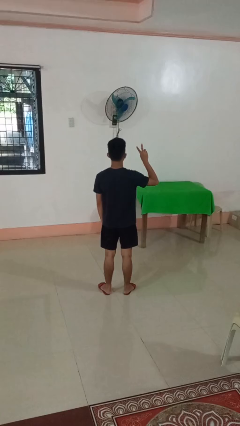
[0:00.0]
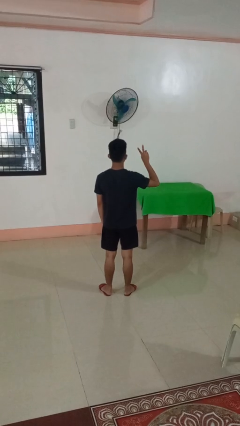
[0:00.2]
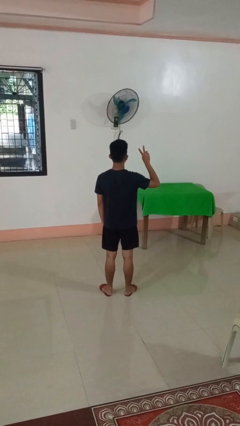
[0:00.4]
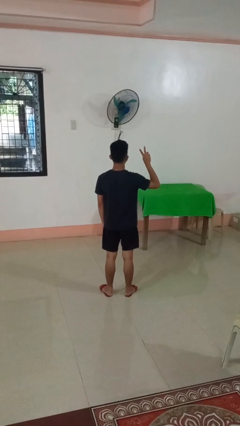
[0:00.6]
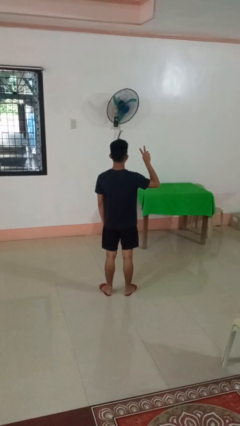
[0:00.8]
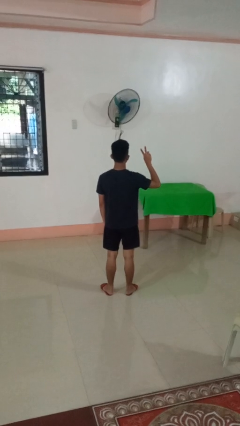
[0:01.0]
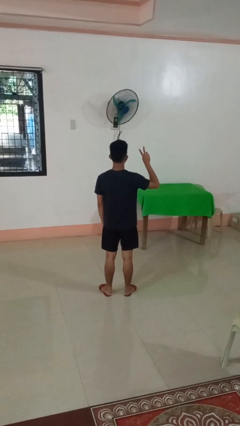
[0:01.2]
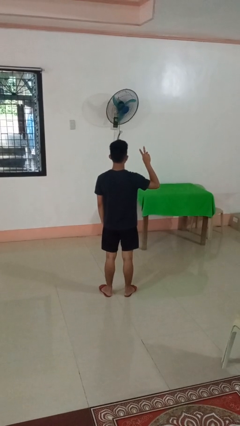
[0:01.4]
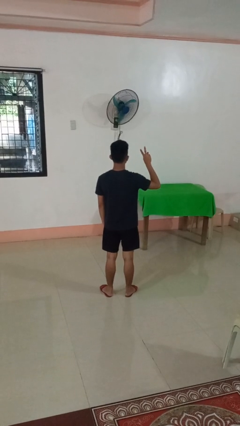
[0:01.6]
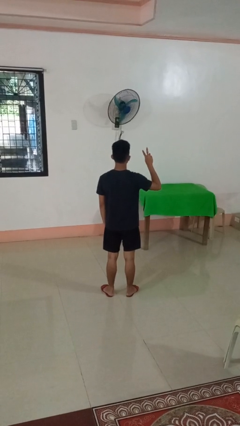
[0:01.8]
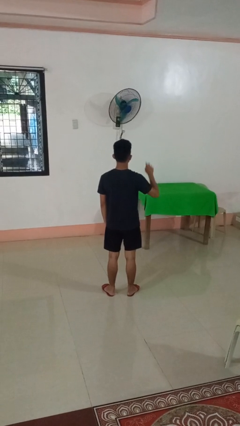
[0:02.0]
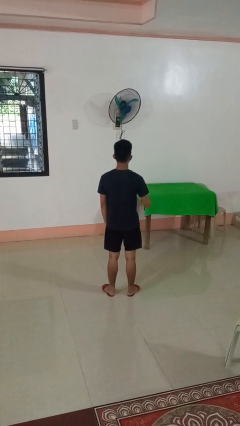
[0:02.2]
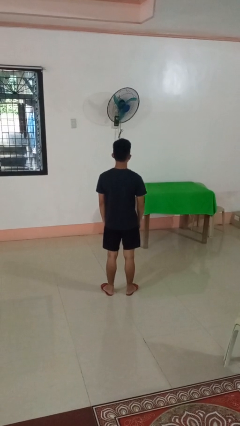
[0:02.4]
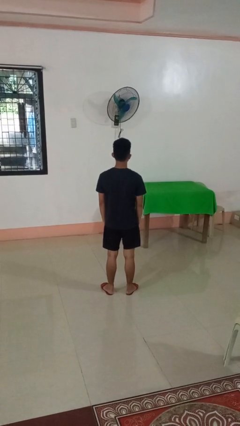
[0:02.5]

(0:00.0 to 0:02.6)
person gestures peace

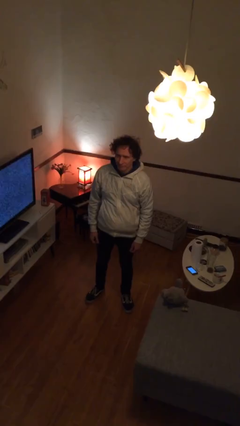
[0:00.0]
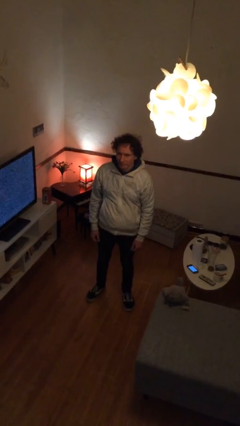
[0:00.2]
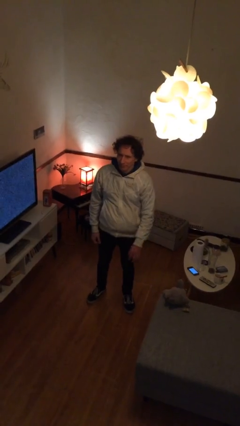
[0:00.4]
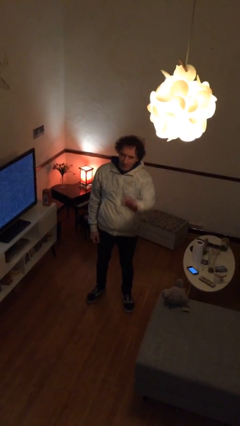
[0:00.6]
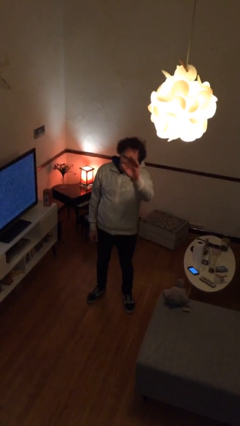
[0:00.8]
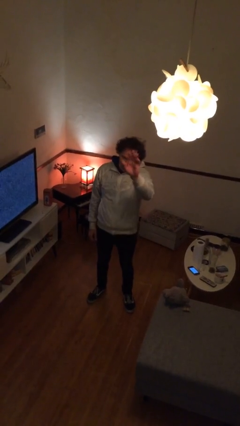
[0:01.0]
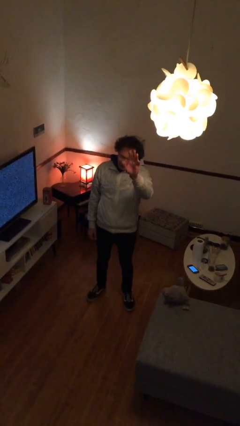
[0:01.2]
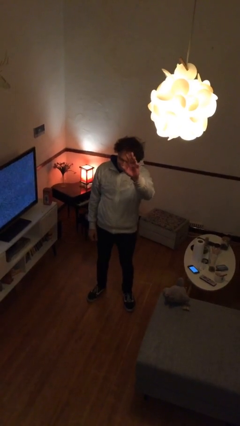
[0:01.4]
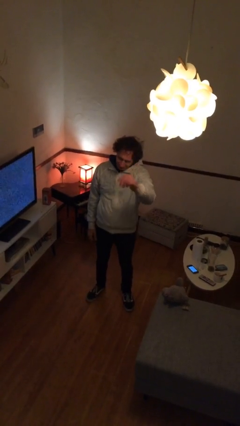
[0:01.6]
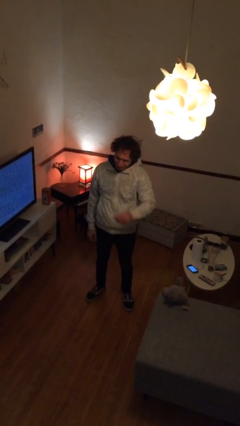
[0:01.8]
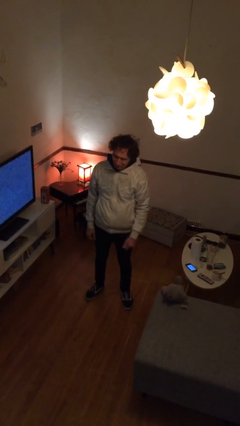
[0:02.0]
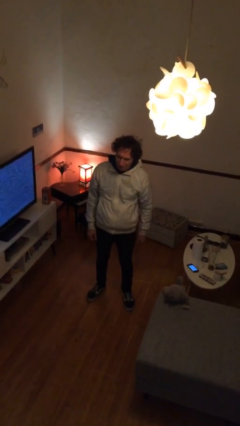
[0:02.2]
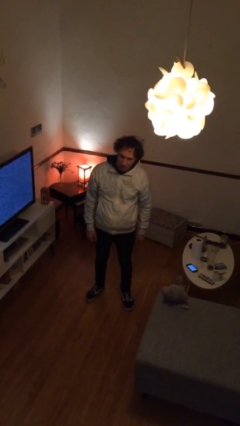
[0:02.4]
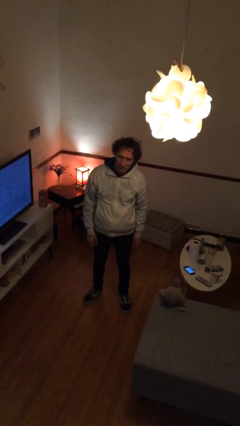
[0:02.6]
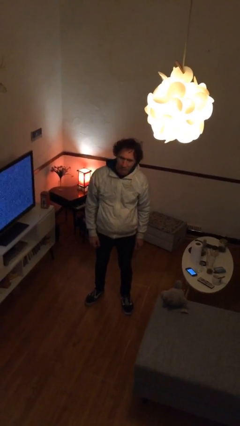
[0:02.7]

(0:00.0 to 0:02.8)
person waves at person

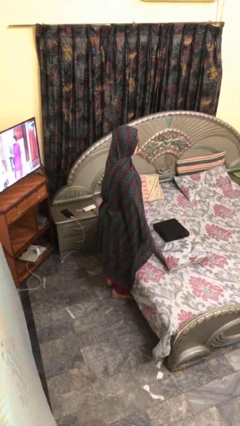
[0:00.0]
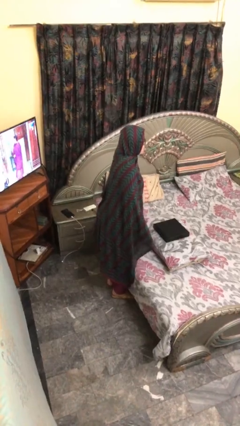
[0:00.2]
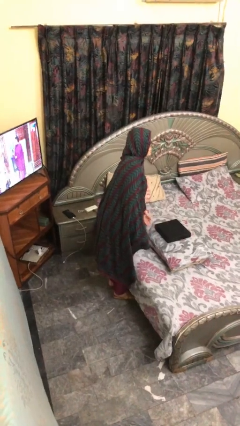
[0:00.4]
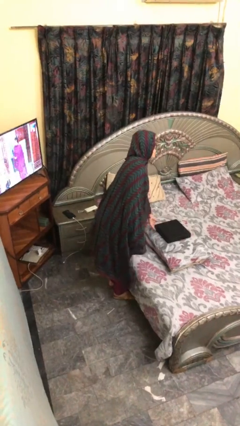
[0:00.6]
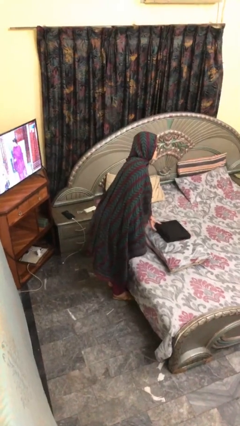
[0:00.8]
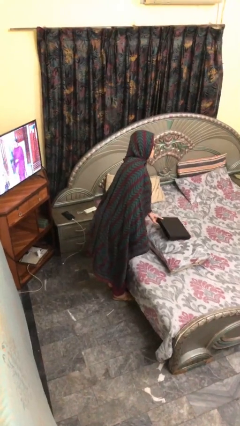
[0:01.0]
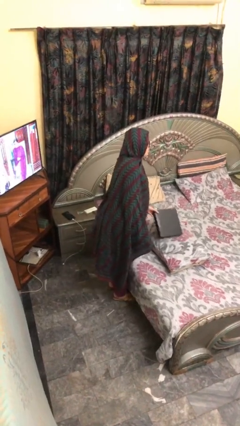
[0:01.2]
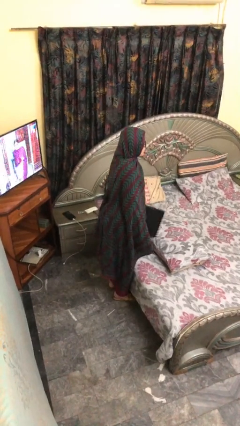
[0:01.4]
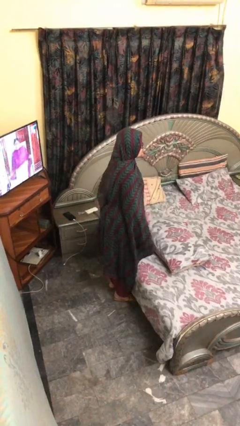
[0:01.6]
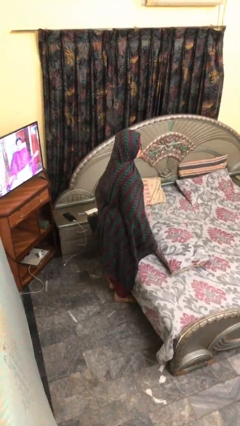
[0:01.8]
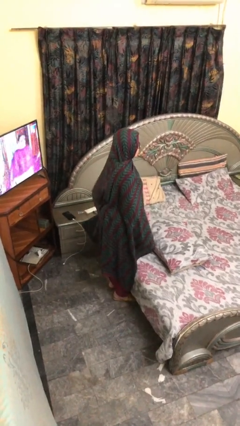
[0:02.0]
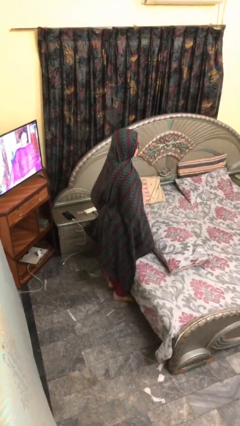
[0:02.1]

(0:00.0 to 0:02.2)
person picks up object from bed

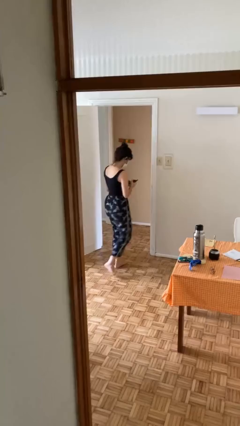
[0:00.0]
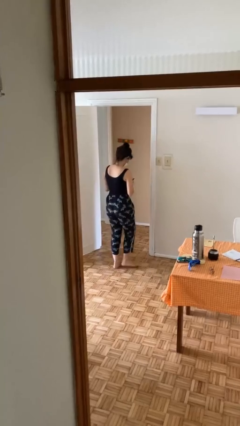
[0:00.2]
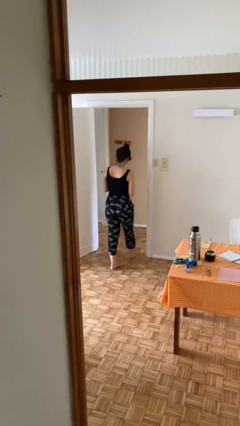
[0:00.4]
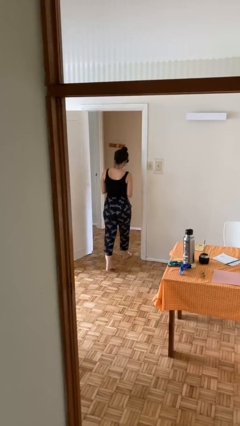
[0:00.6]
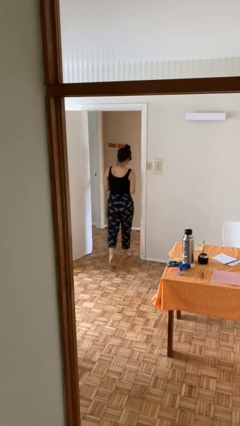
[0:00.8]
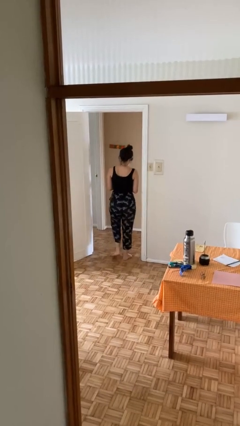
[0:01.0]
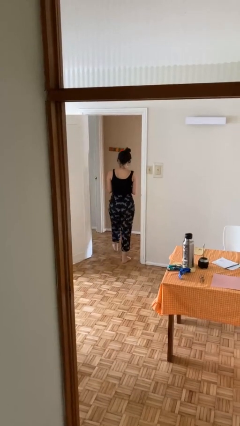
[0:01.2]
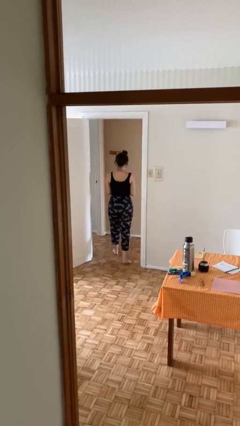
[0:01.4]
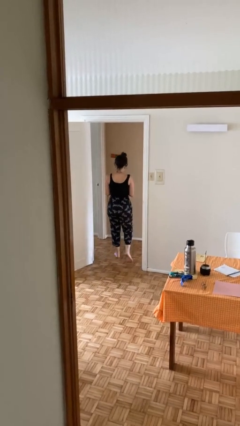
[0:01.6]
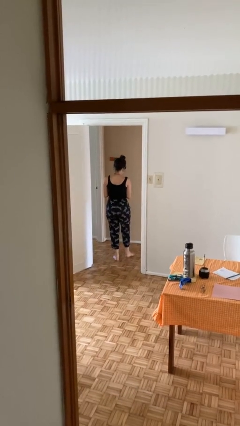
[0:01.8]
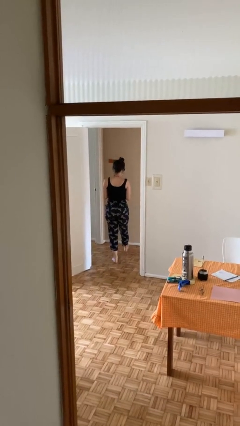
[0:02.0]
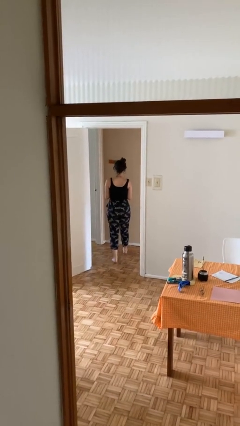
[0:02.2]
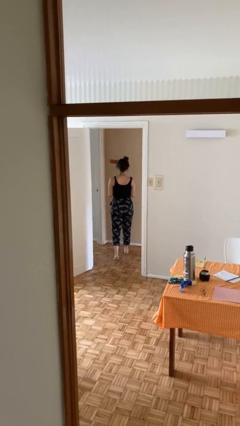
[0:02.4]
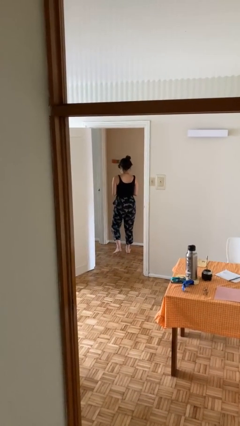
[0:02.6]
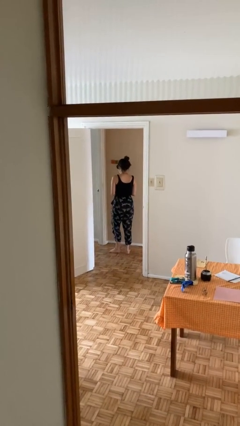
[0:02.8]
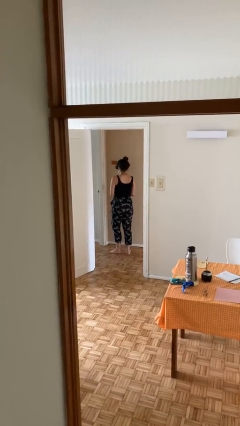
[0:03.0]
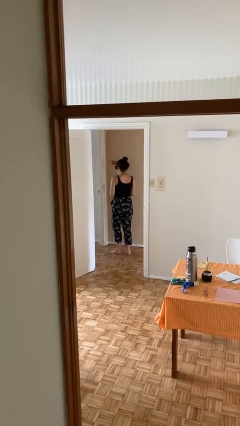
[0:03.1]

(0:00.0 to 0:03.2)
person exits scene through structure

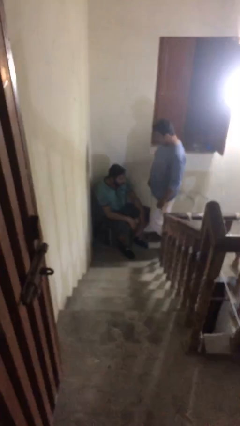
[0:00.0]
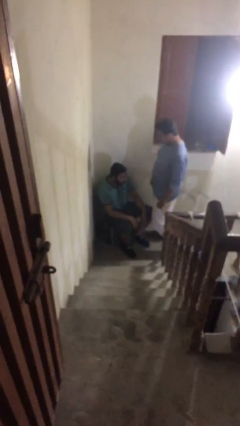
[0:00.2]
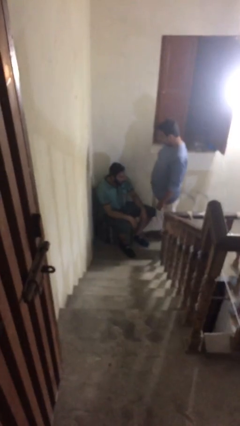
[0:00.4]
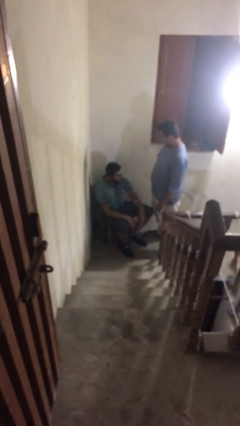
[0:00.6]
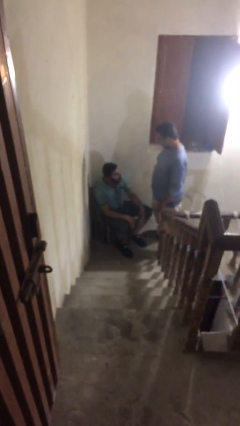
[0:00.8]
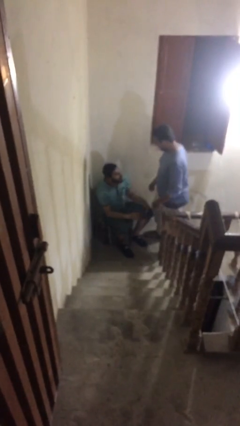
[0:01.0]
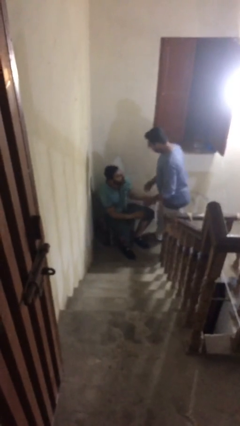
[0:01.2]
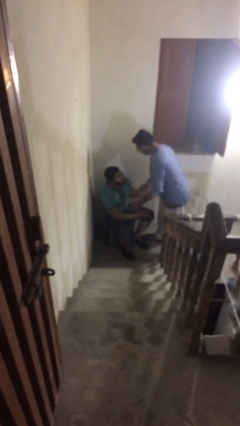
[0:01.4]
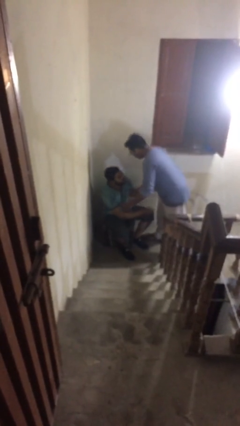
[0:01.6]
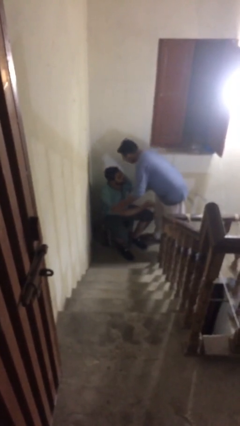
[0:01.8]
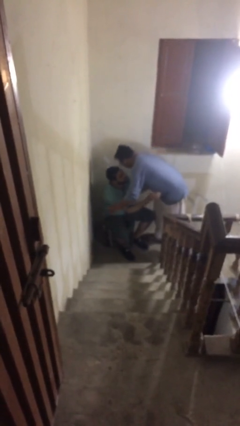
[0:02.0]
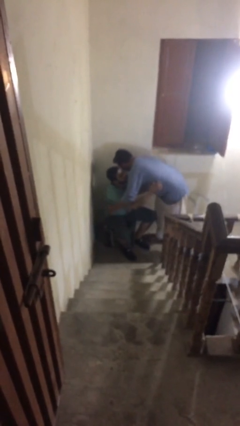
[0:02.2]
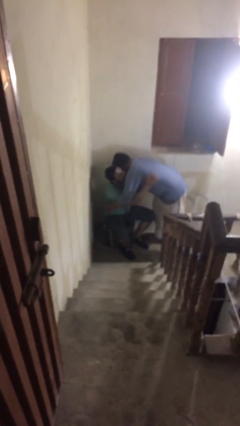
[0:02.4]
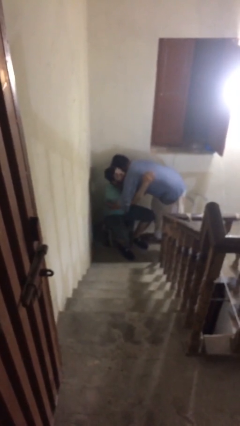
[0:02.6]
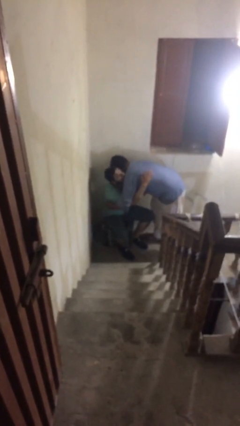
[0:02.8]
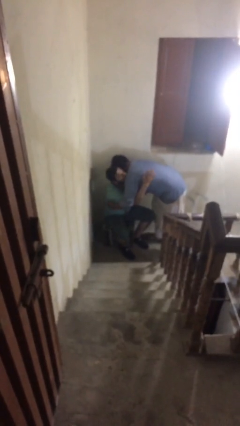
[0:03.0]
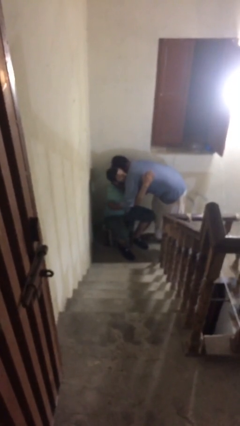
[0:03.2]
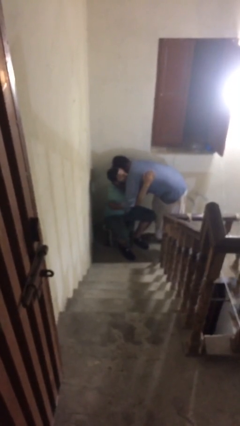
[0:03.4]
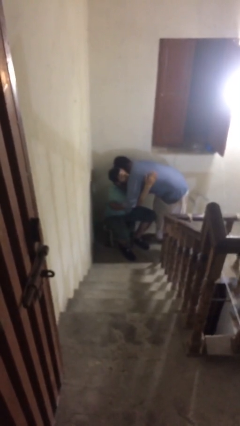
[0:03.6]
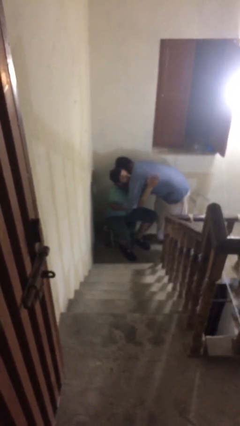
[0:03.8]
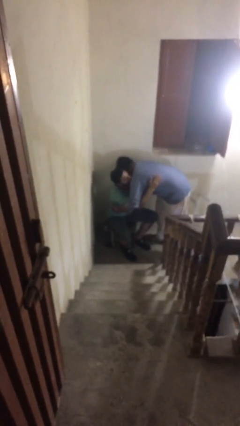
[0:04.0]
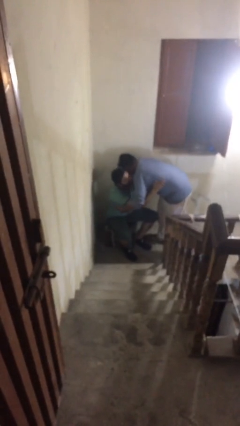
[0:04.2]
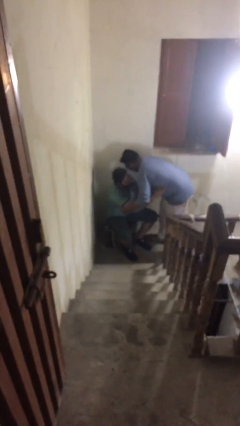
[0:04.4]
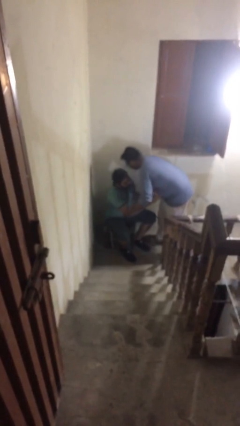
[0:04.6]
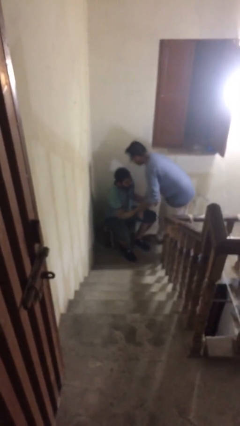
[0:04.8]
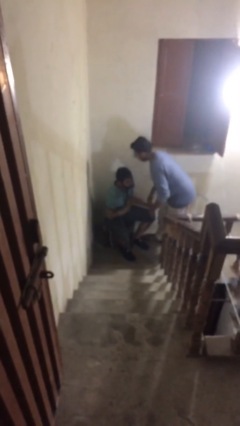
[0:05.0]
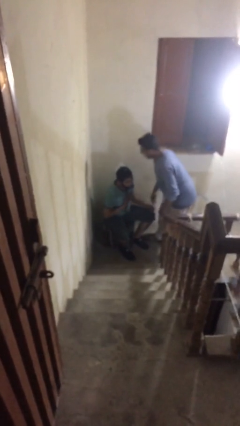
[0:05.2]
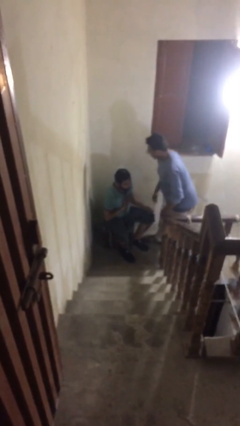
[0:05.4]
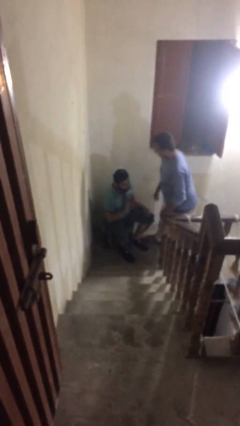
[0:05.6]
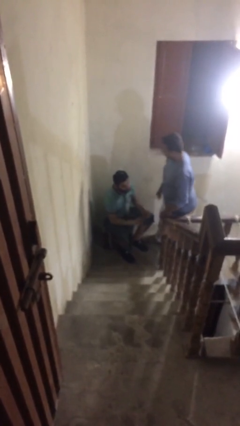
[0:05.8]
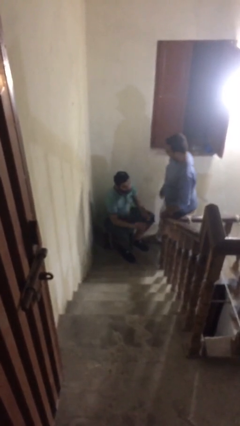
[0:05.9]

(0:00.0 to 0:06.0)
person embraces person

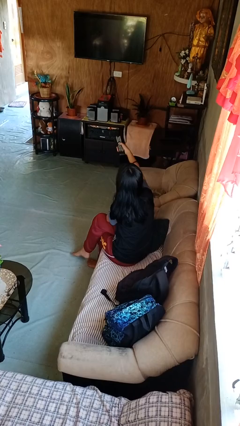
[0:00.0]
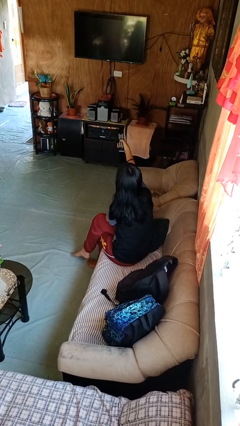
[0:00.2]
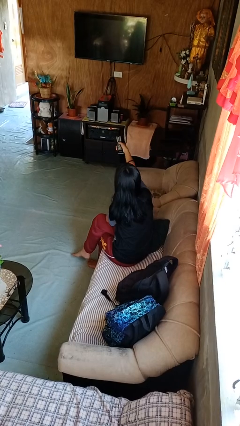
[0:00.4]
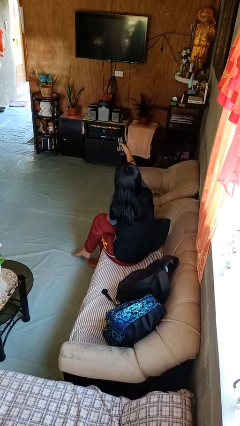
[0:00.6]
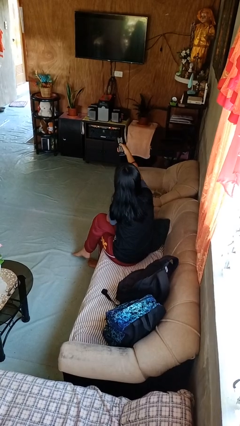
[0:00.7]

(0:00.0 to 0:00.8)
person uses television remote

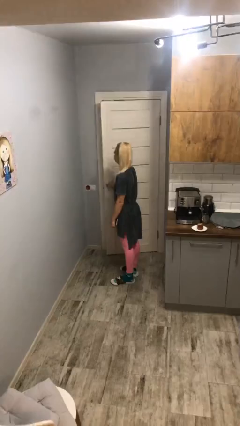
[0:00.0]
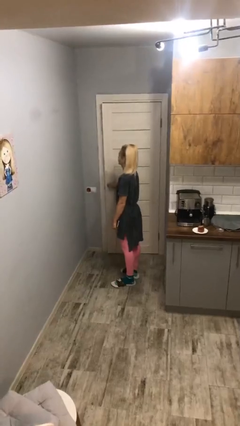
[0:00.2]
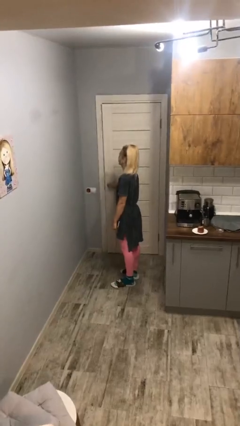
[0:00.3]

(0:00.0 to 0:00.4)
person closes facility door
